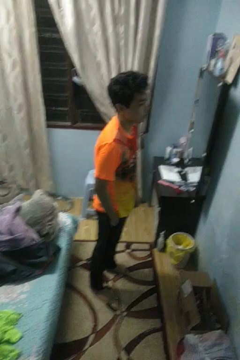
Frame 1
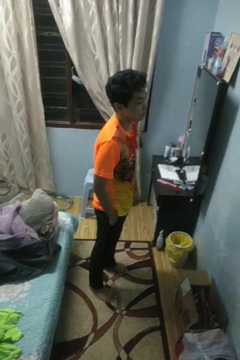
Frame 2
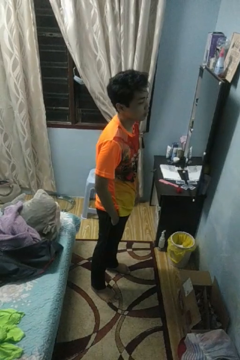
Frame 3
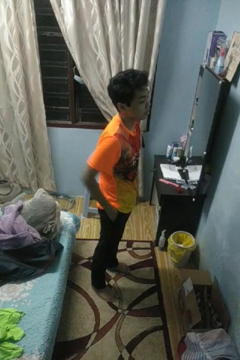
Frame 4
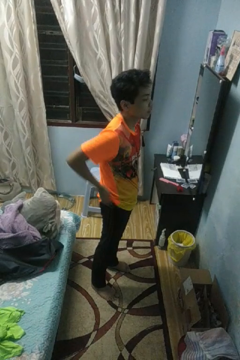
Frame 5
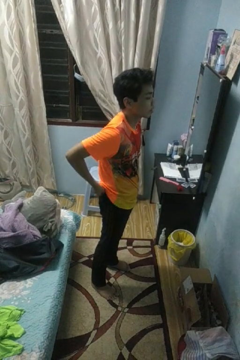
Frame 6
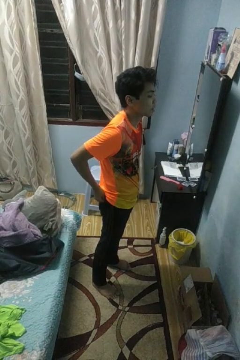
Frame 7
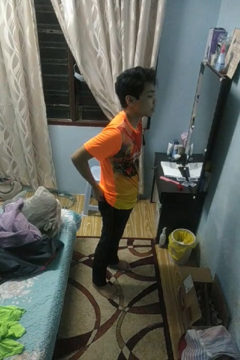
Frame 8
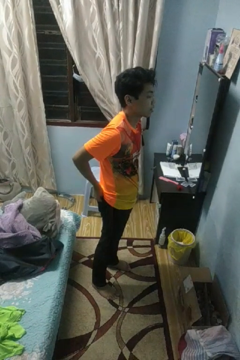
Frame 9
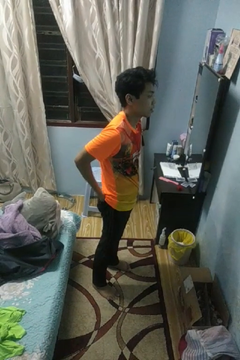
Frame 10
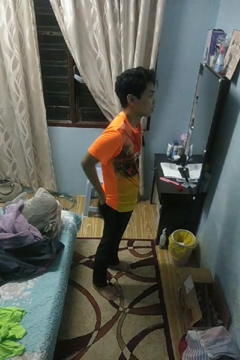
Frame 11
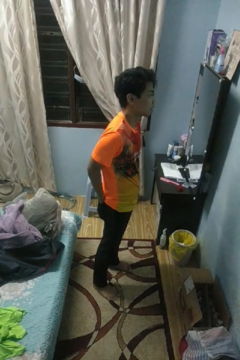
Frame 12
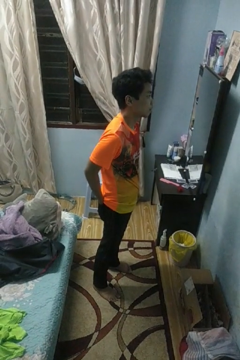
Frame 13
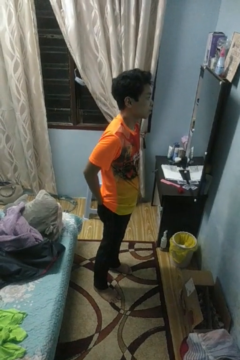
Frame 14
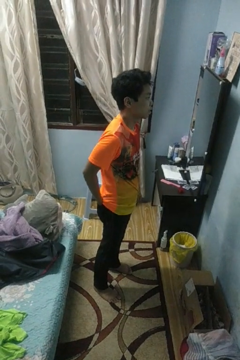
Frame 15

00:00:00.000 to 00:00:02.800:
person puts hands in back pockets

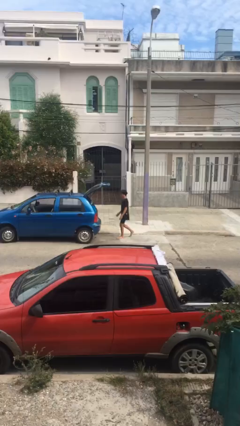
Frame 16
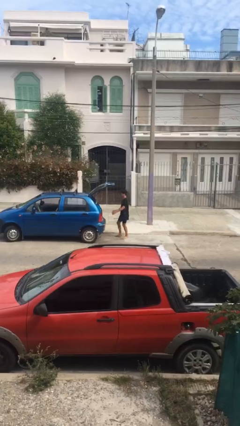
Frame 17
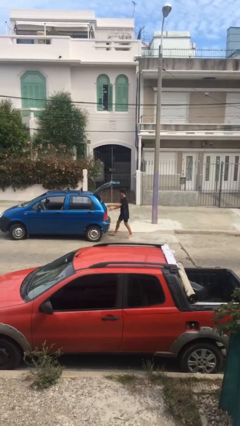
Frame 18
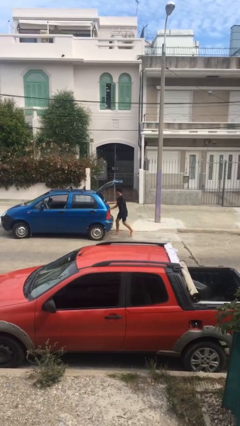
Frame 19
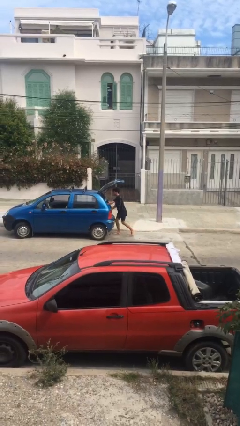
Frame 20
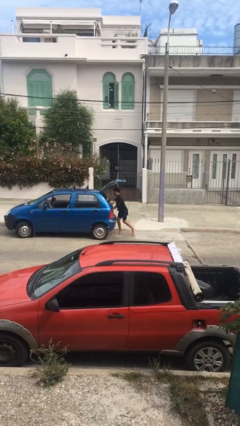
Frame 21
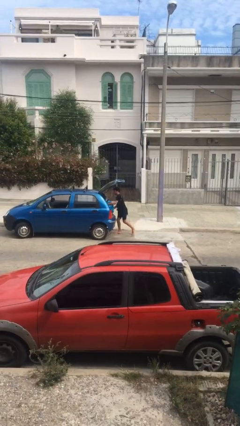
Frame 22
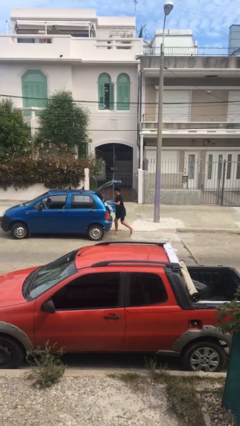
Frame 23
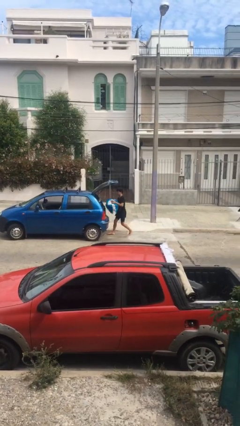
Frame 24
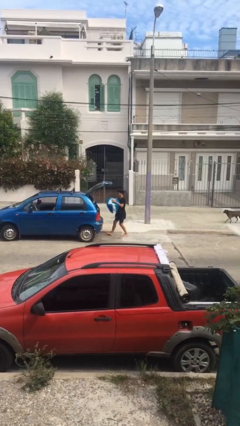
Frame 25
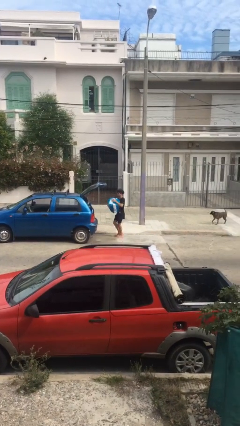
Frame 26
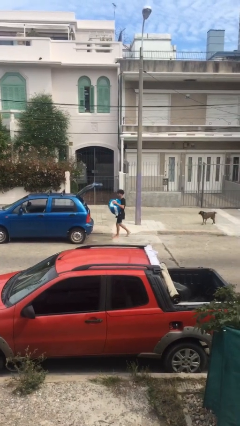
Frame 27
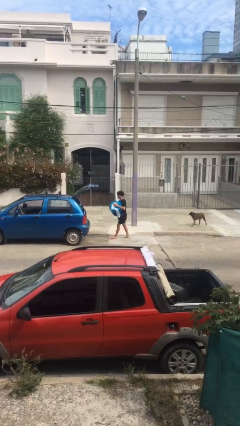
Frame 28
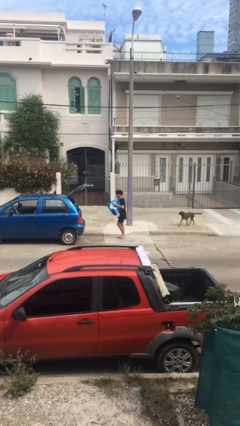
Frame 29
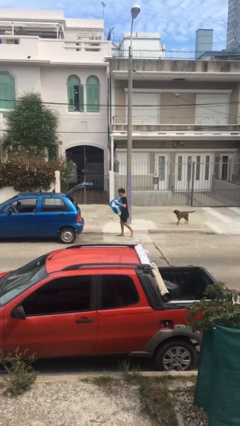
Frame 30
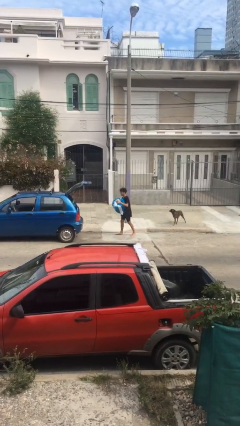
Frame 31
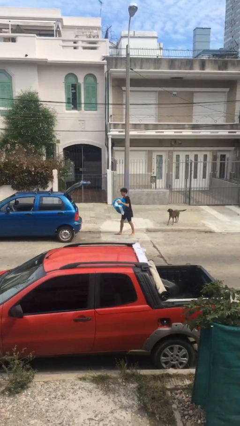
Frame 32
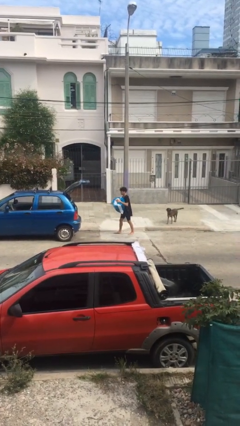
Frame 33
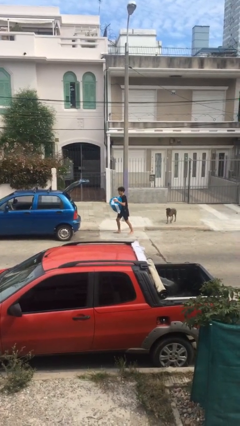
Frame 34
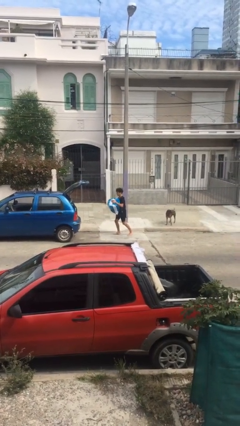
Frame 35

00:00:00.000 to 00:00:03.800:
person unloads car

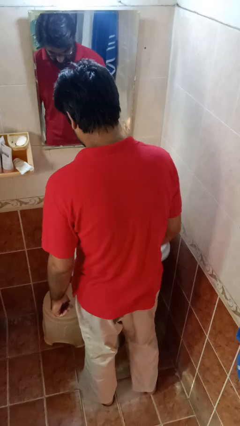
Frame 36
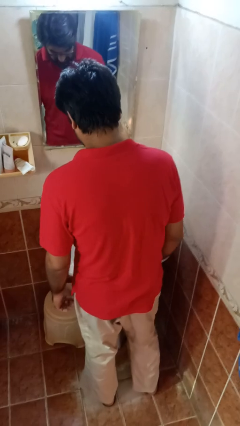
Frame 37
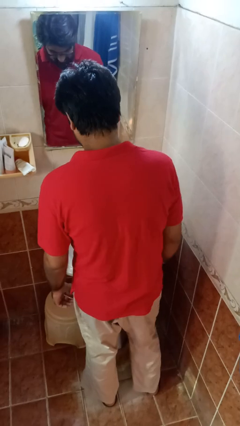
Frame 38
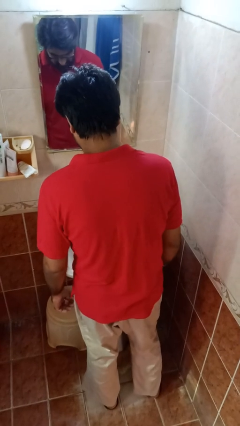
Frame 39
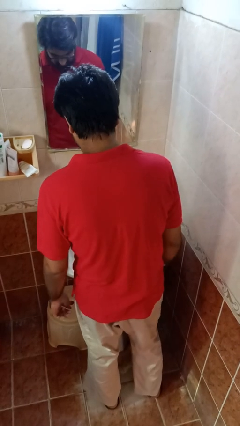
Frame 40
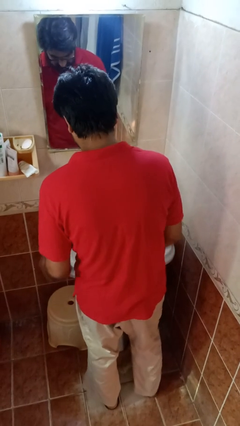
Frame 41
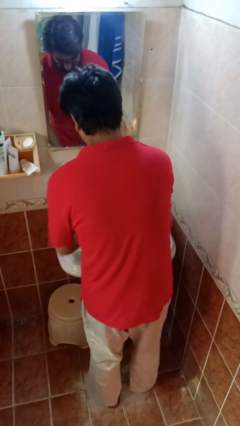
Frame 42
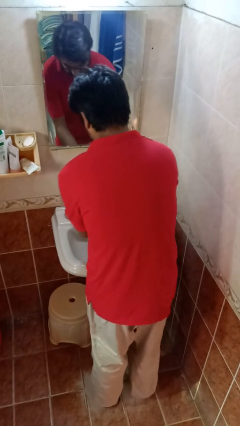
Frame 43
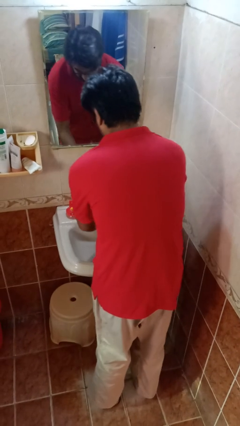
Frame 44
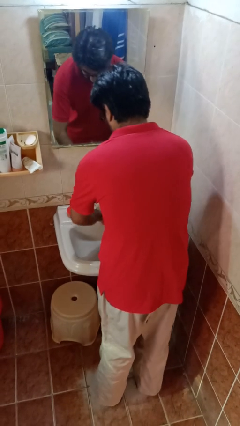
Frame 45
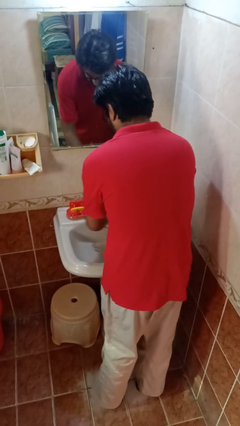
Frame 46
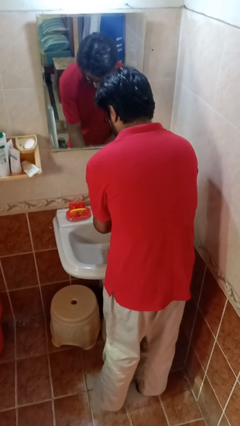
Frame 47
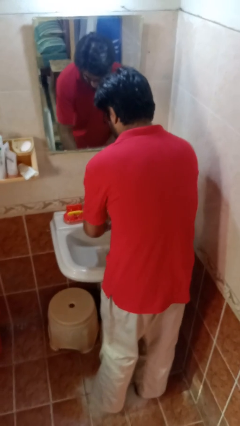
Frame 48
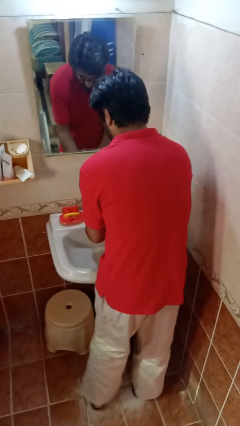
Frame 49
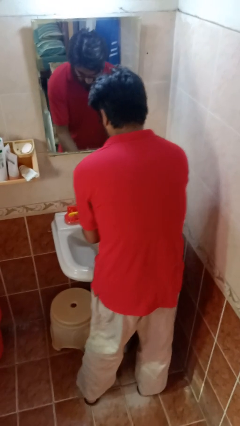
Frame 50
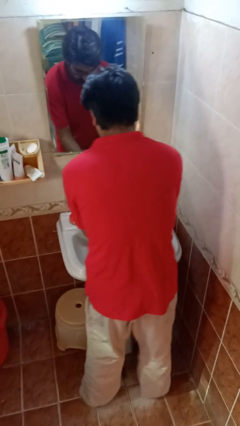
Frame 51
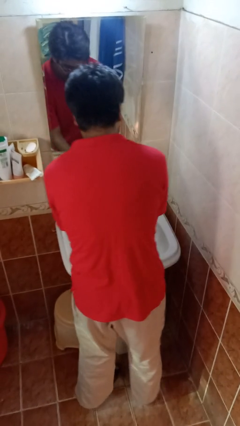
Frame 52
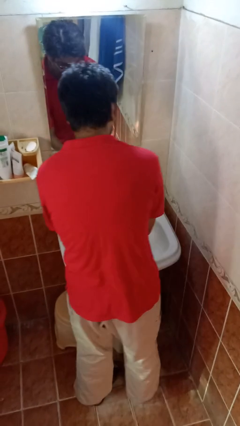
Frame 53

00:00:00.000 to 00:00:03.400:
person washes hands

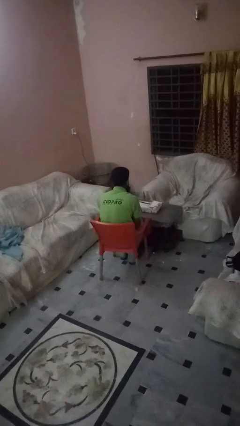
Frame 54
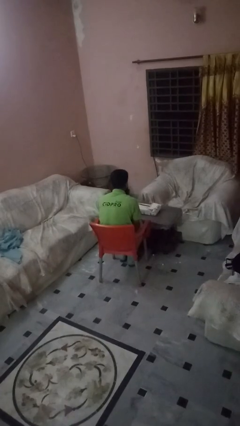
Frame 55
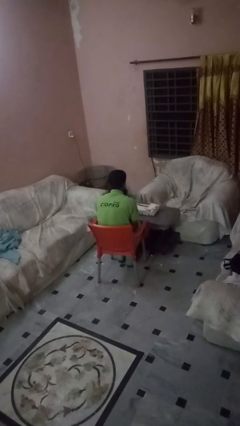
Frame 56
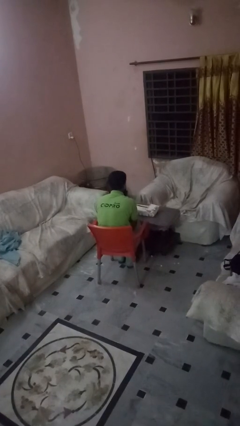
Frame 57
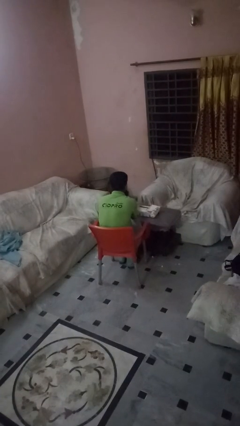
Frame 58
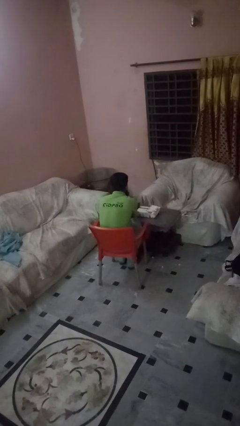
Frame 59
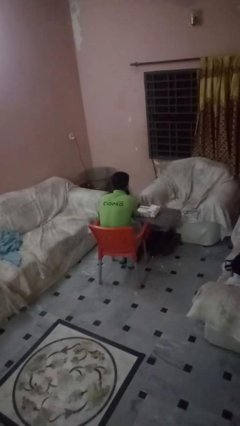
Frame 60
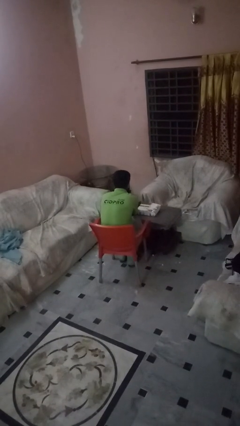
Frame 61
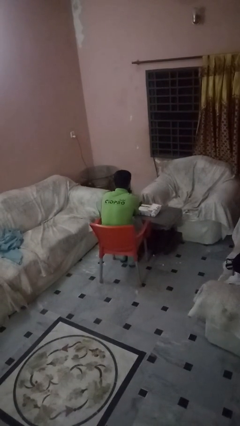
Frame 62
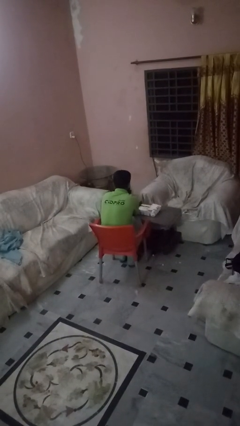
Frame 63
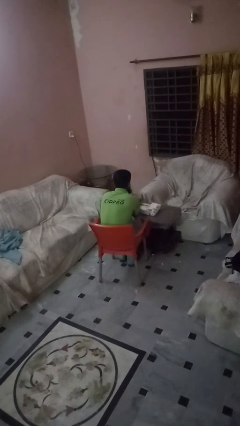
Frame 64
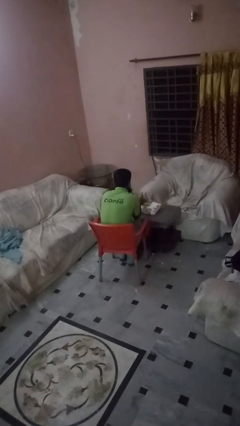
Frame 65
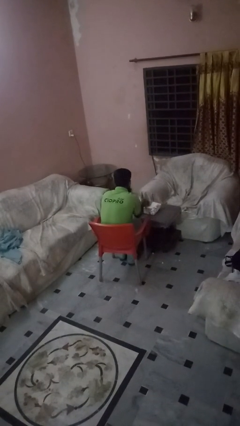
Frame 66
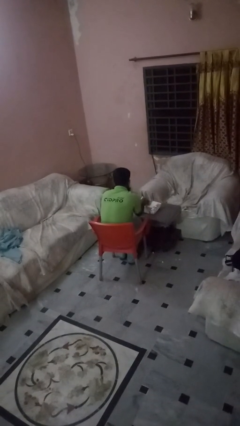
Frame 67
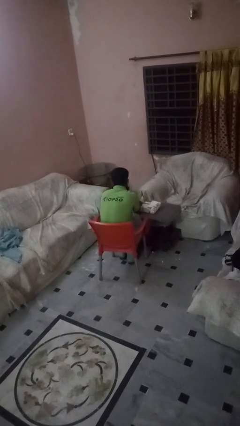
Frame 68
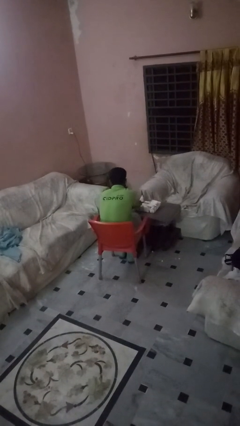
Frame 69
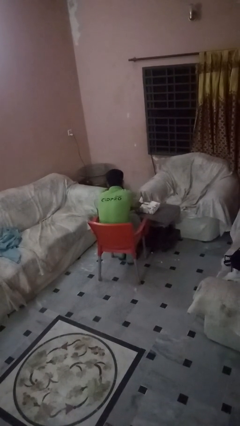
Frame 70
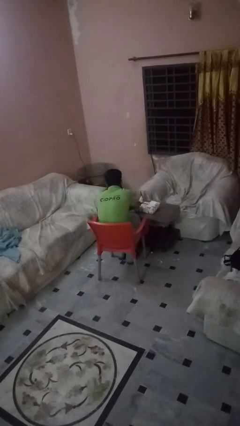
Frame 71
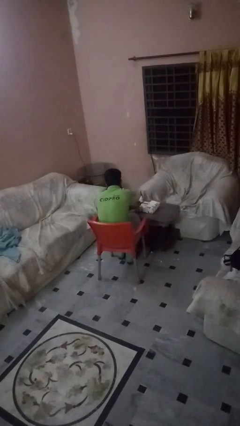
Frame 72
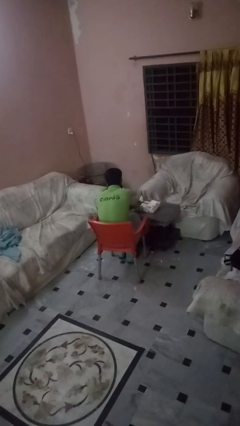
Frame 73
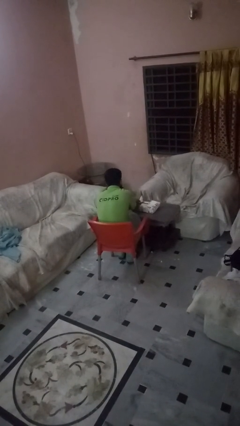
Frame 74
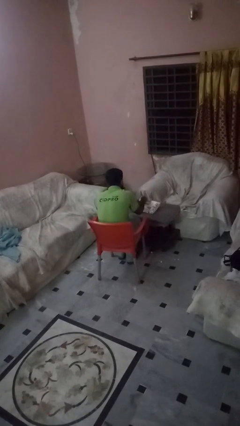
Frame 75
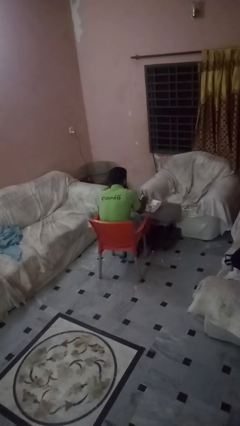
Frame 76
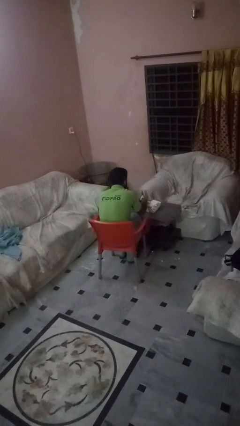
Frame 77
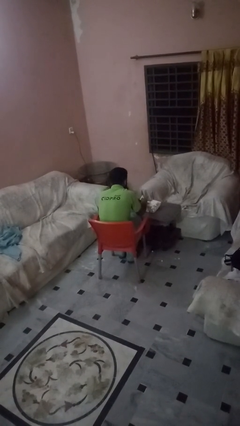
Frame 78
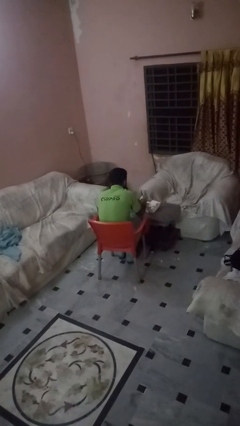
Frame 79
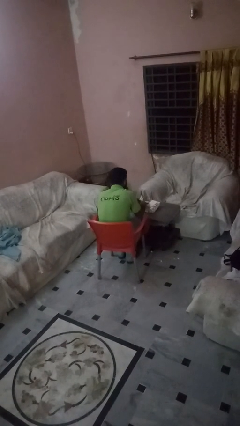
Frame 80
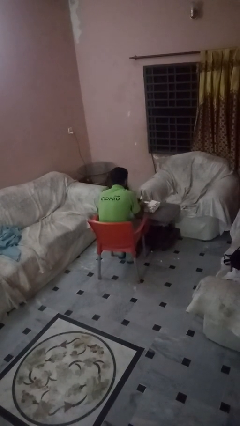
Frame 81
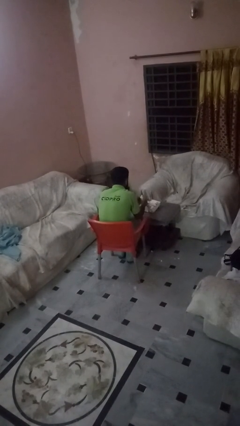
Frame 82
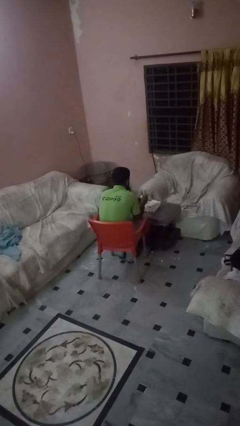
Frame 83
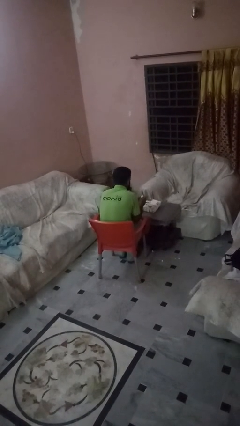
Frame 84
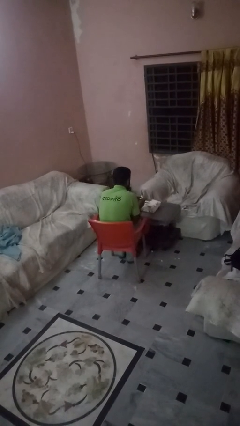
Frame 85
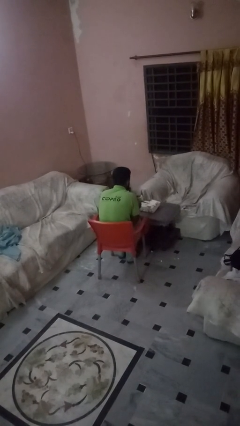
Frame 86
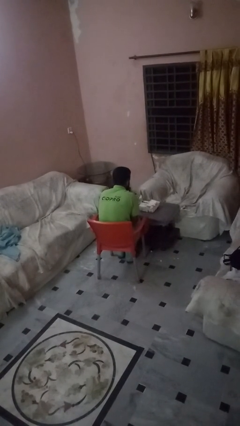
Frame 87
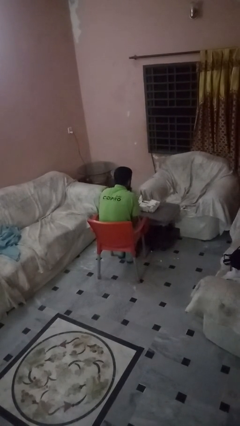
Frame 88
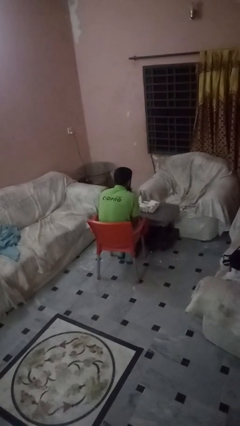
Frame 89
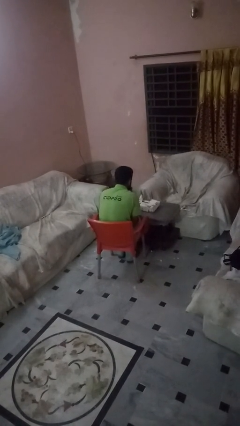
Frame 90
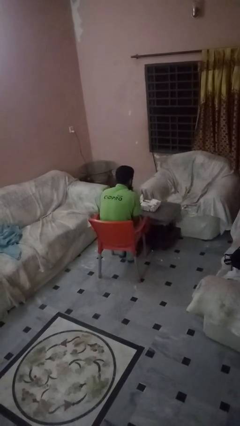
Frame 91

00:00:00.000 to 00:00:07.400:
person wraps box

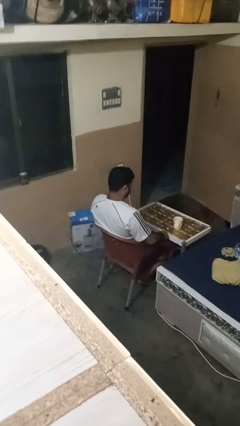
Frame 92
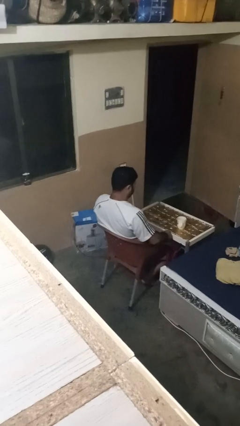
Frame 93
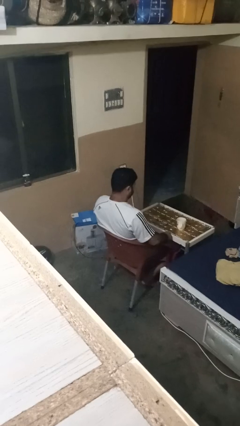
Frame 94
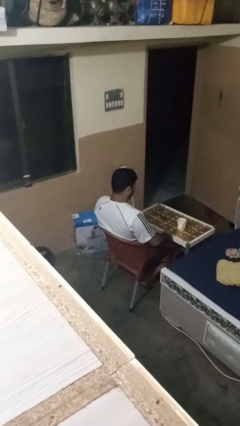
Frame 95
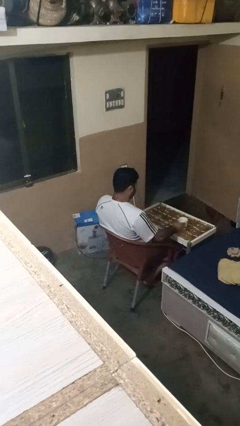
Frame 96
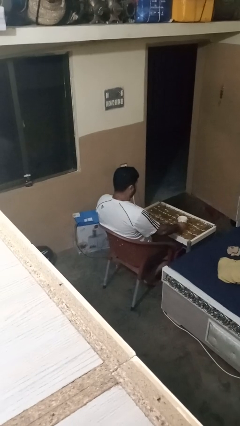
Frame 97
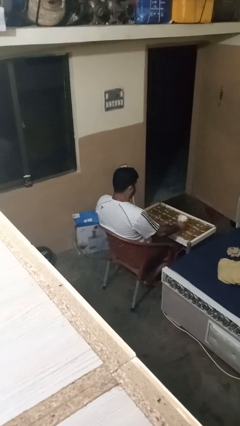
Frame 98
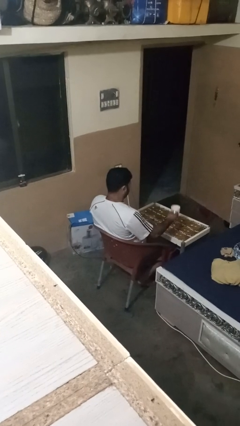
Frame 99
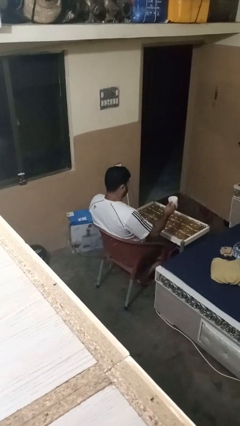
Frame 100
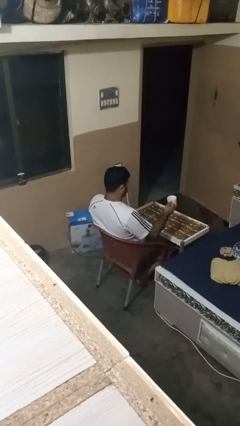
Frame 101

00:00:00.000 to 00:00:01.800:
person picks up object from table
